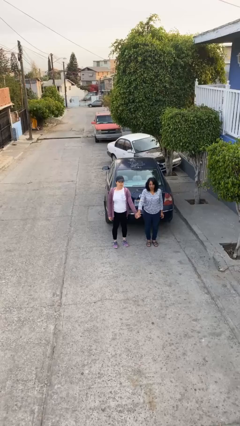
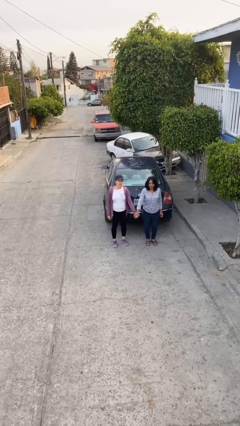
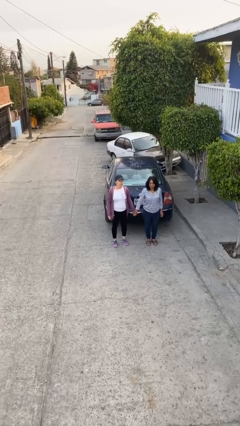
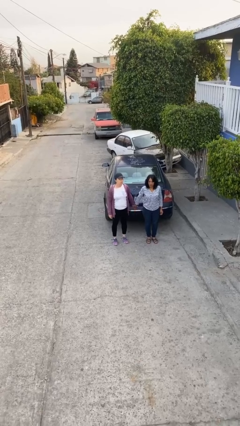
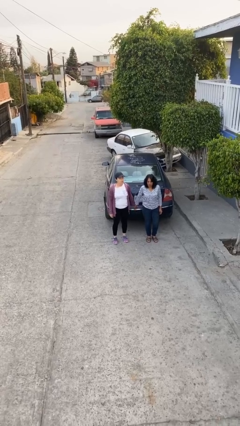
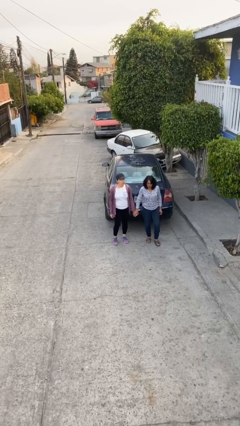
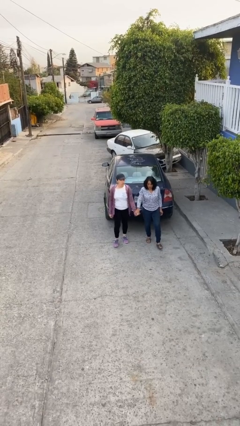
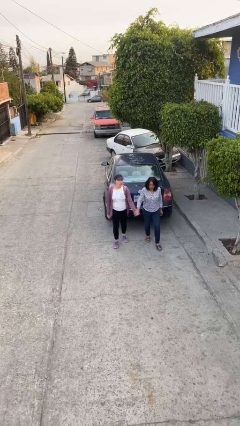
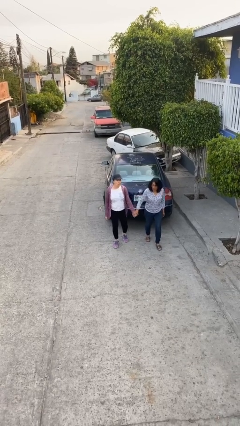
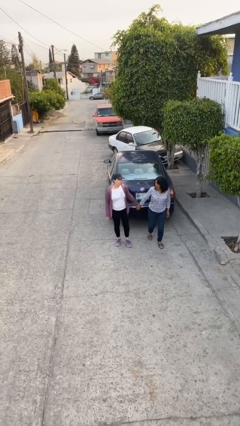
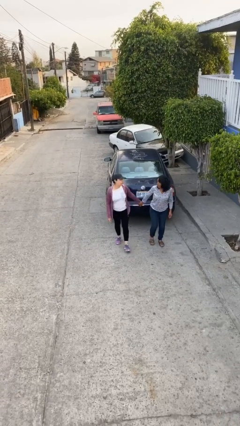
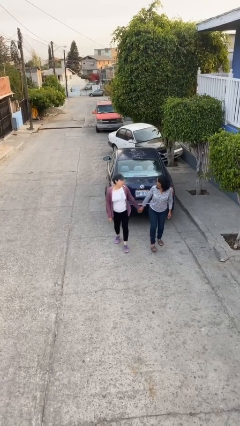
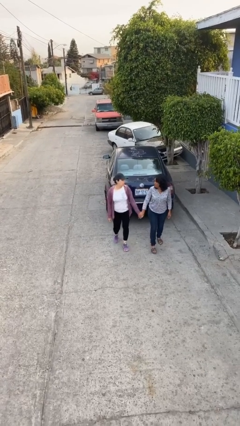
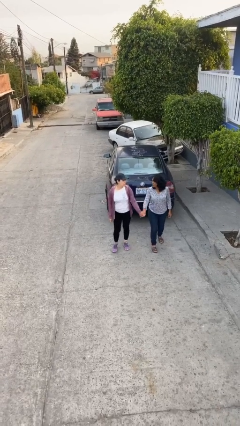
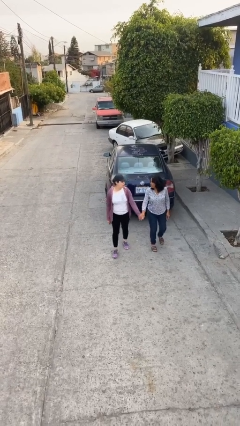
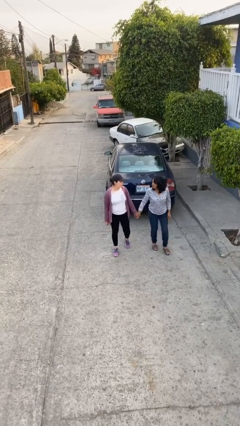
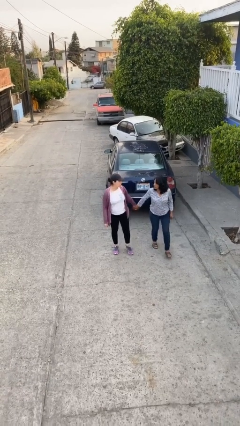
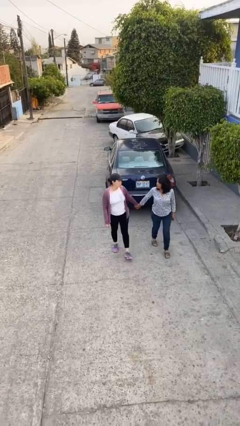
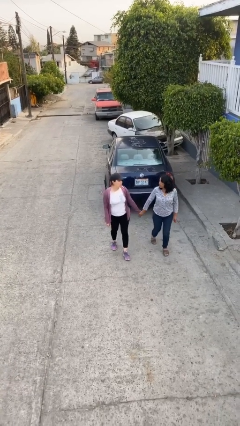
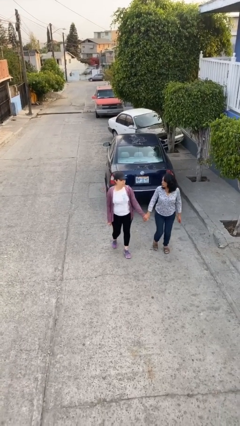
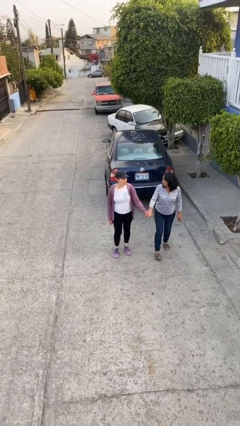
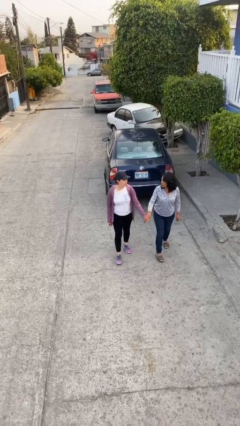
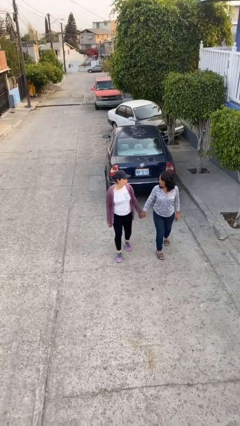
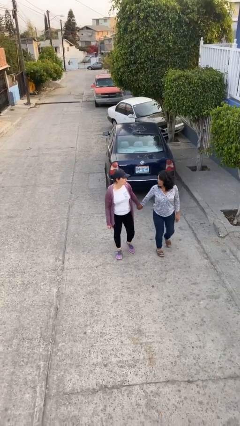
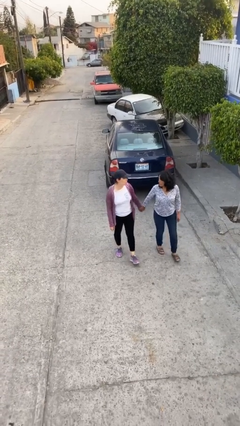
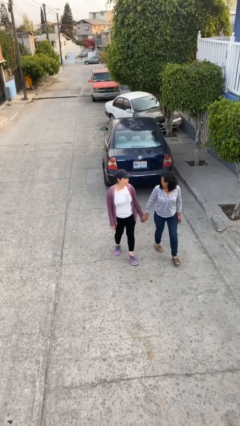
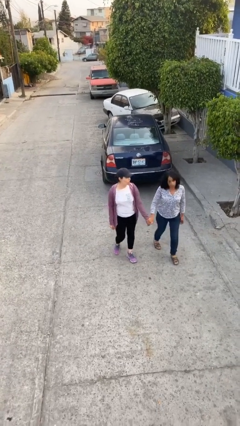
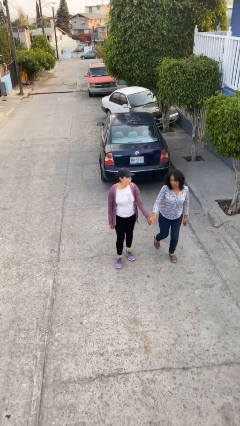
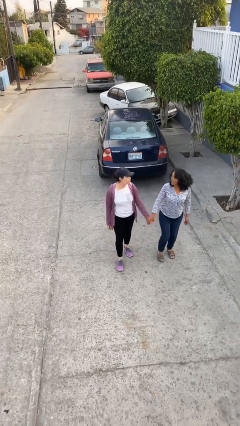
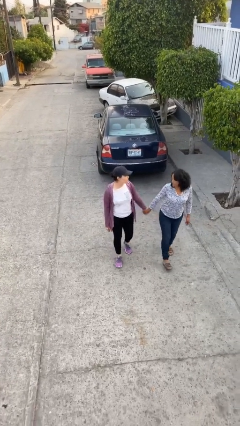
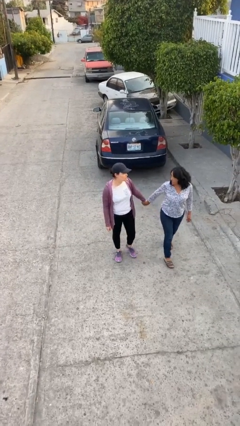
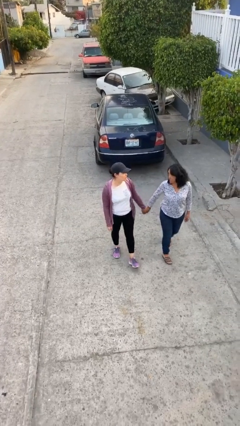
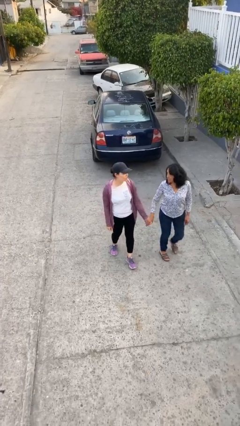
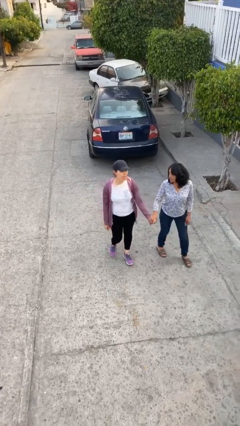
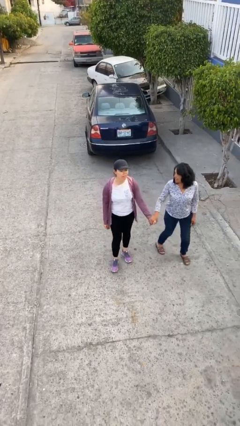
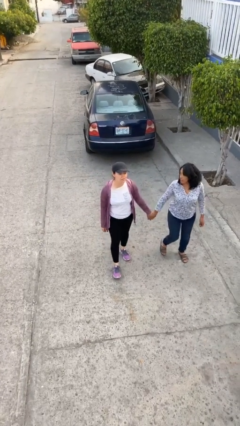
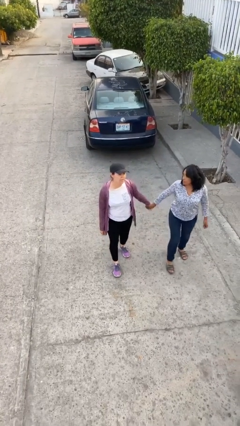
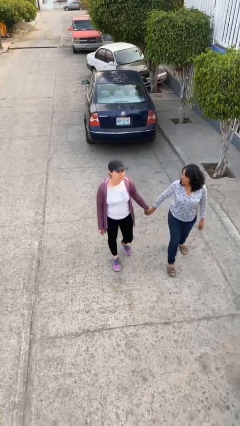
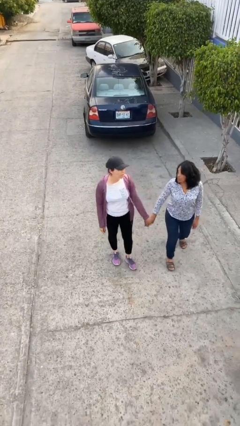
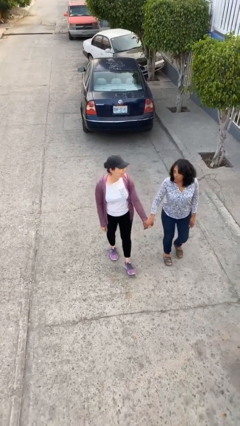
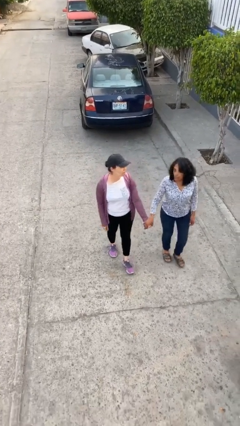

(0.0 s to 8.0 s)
person holds hand

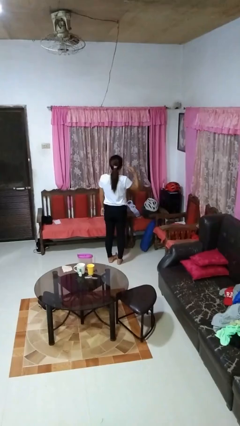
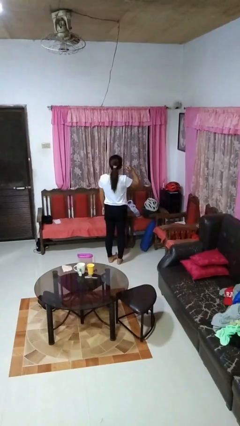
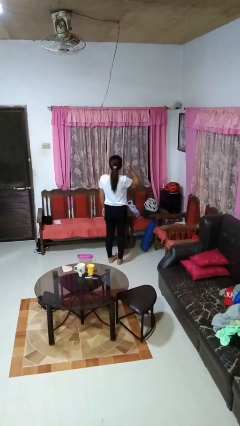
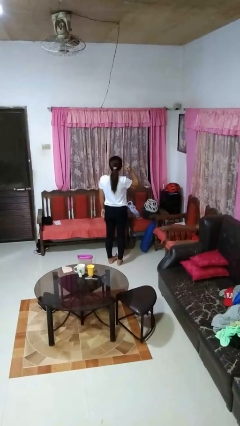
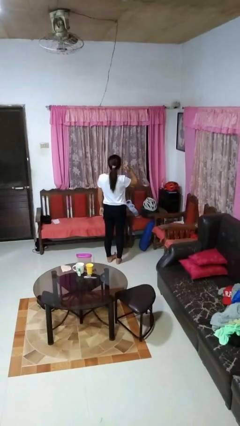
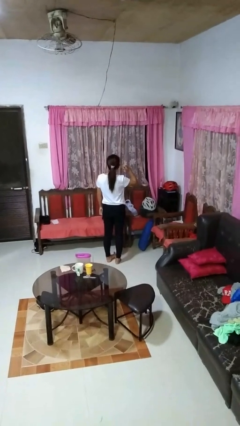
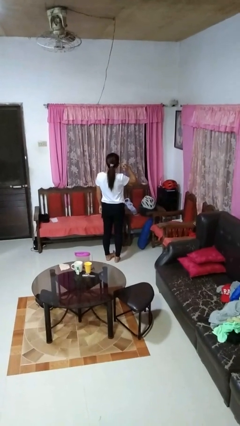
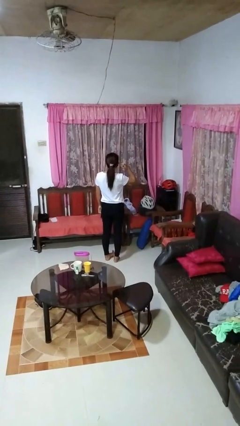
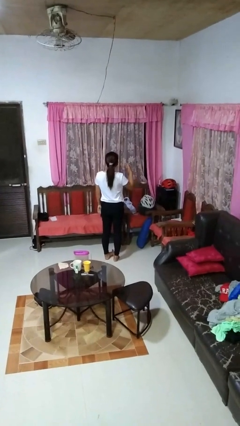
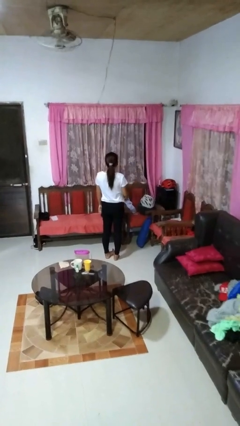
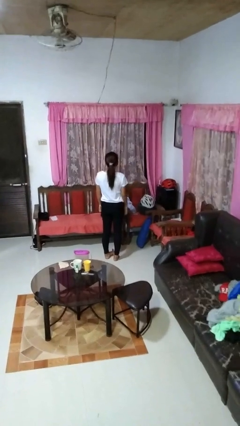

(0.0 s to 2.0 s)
person gestures listen closely

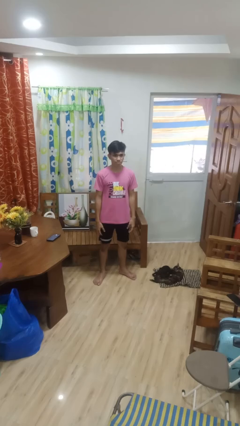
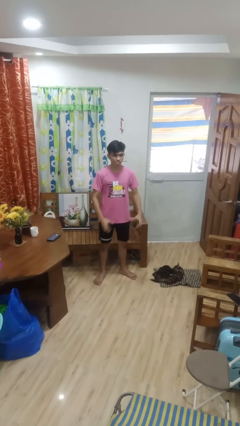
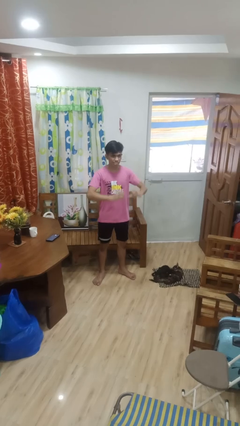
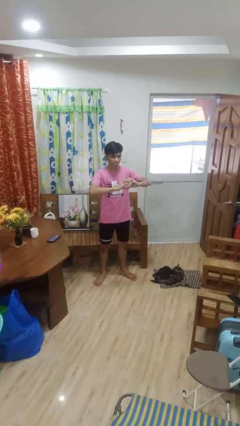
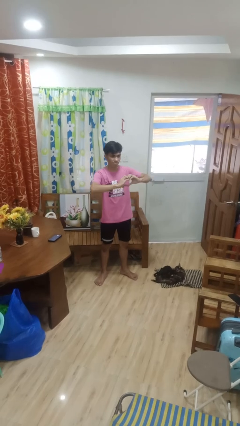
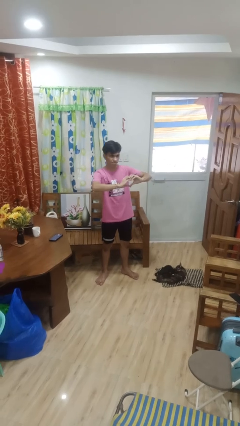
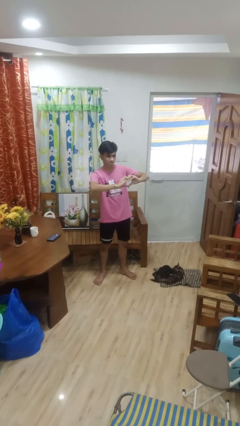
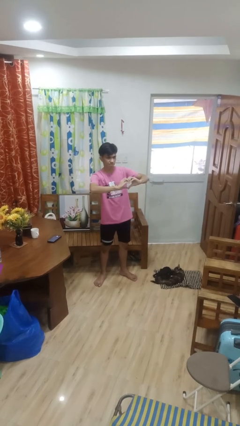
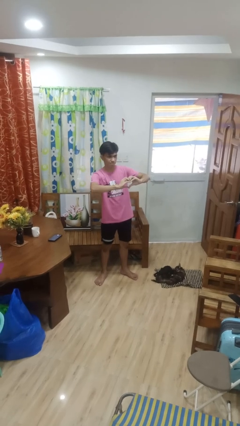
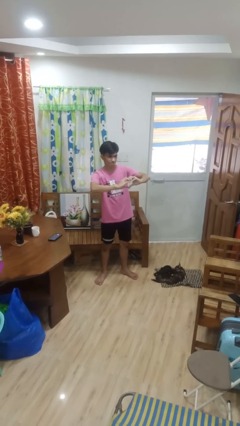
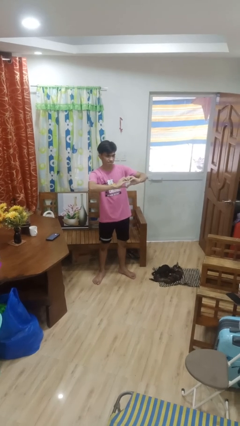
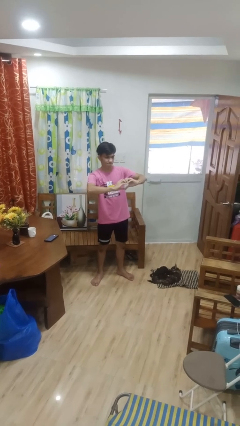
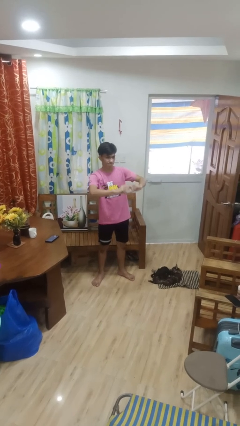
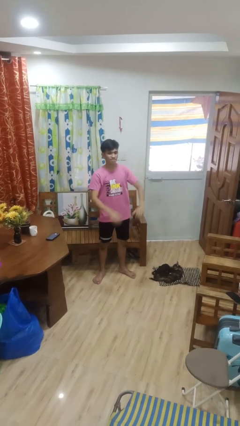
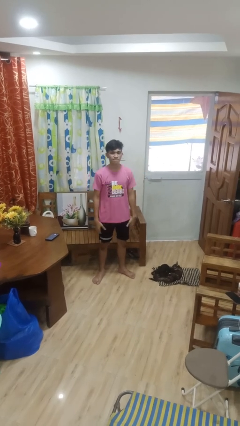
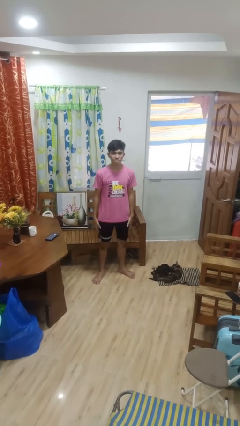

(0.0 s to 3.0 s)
person gestures heart

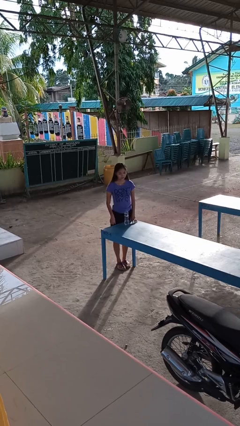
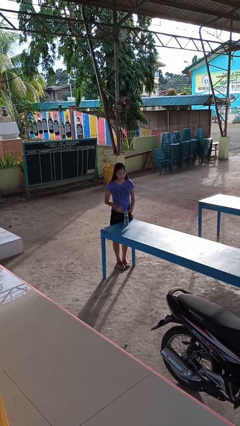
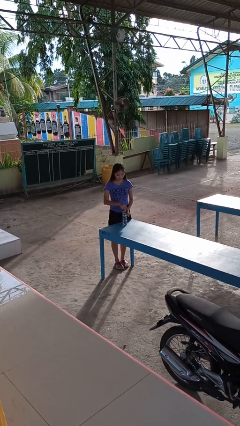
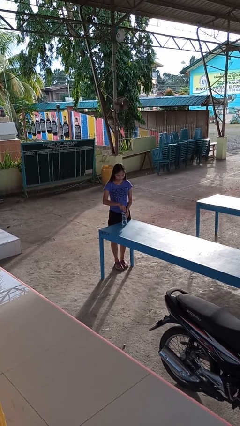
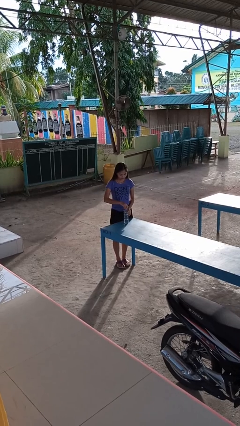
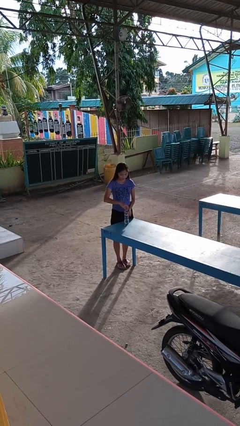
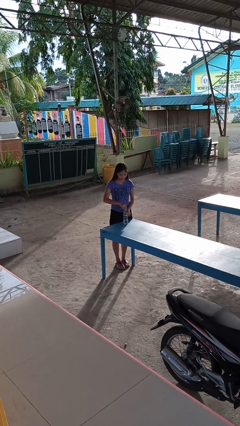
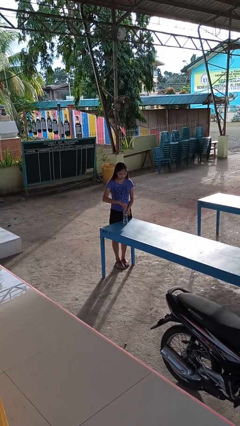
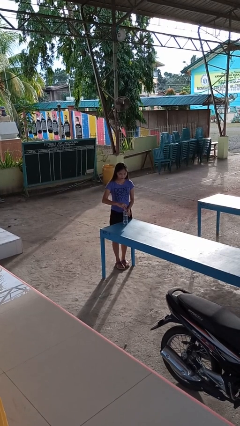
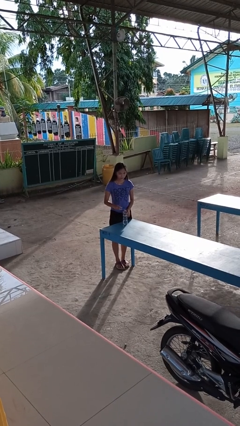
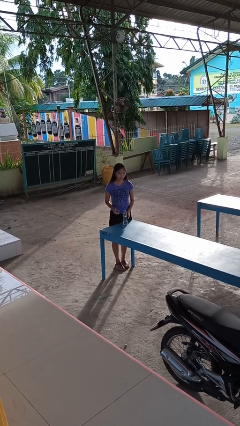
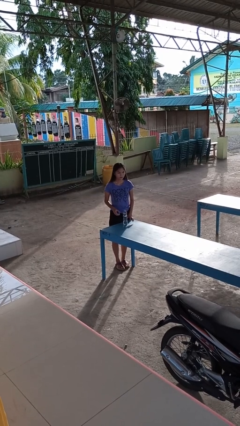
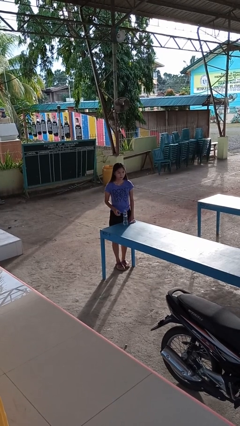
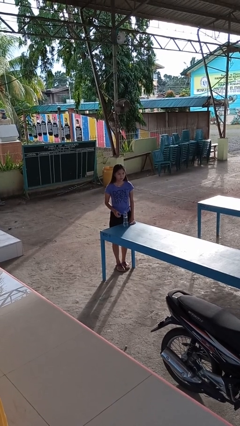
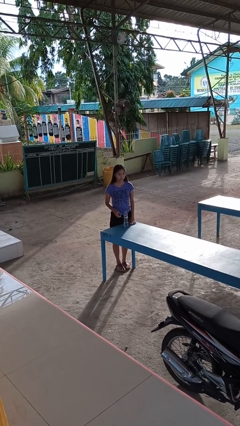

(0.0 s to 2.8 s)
person unscrews lid from bottle

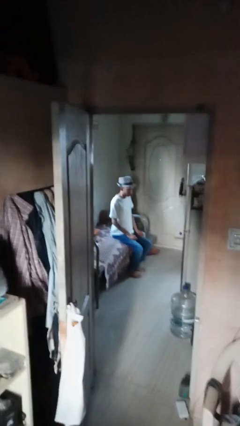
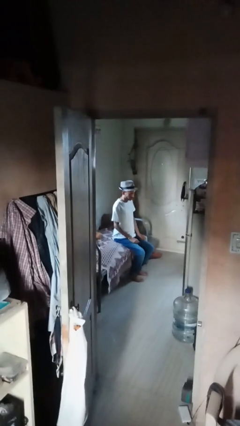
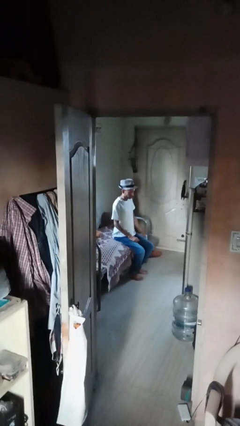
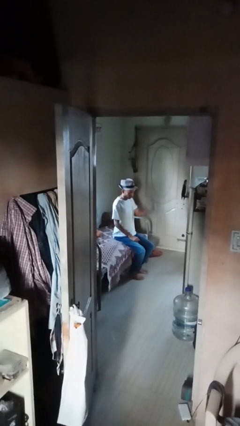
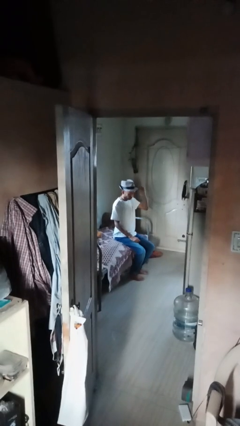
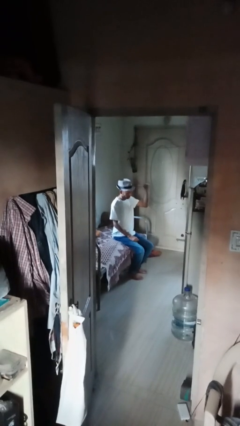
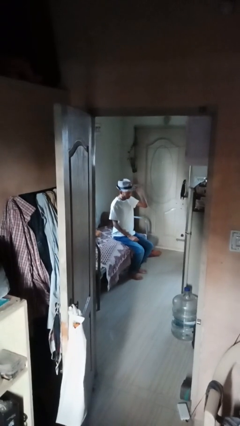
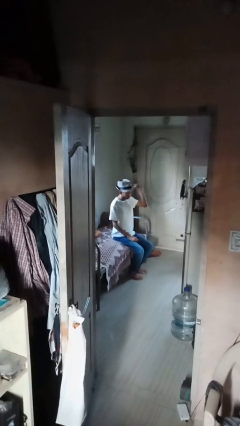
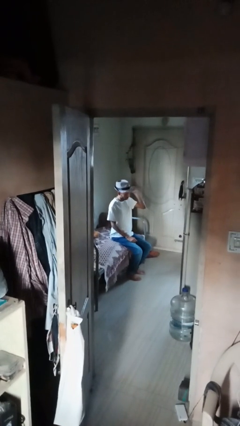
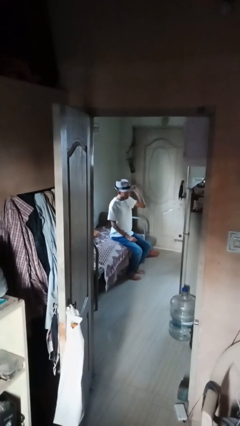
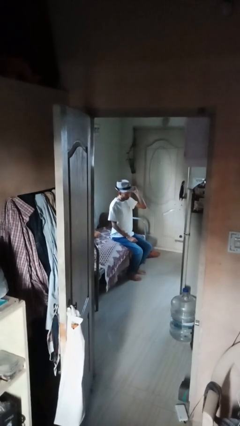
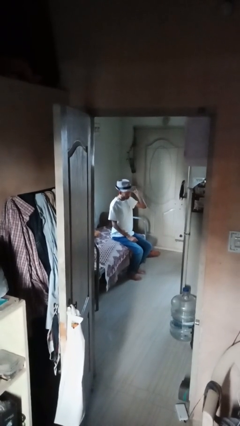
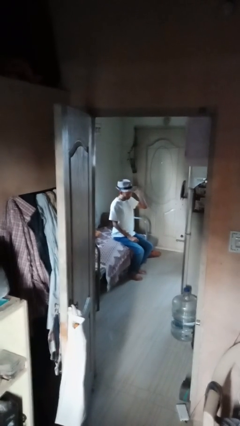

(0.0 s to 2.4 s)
person gestures behind me
